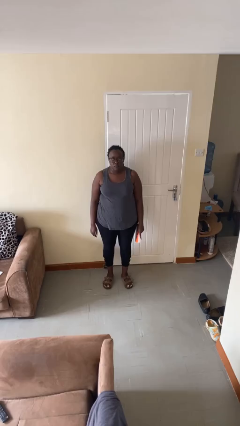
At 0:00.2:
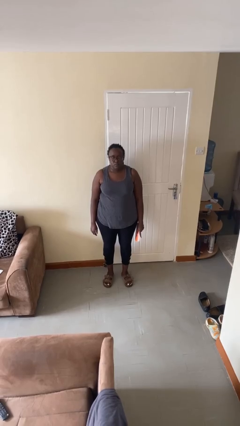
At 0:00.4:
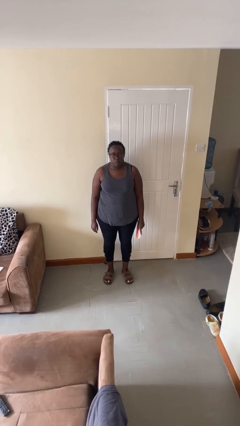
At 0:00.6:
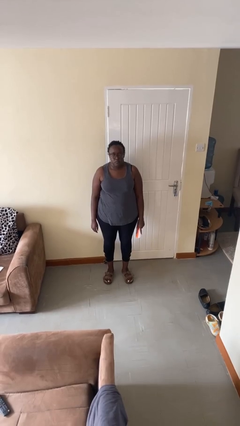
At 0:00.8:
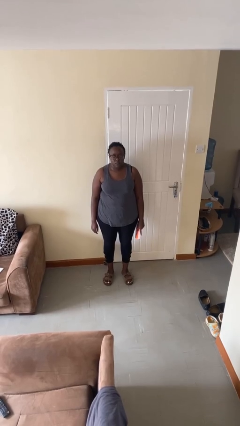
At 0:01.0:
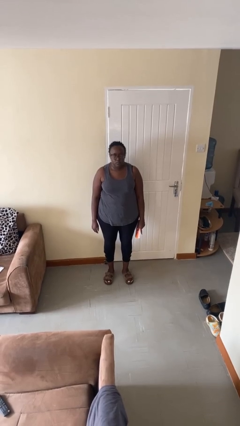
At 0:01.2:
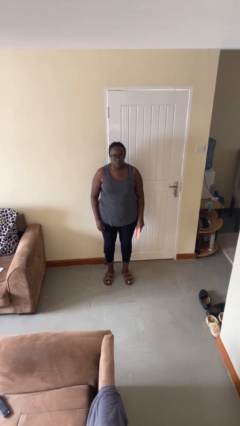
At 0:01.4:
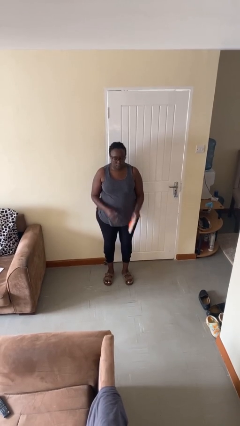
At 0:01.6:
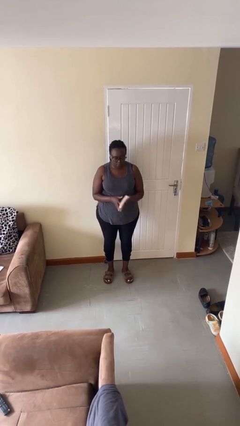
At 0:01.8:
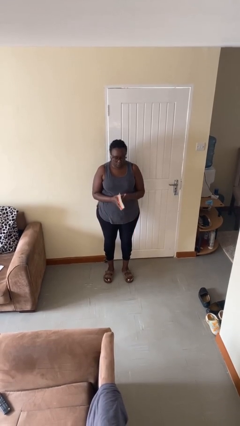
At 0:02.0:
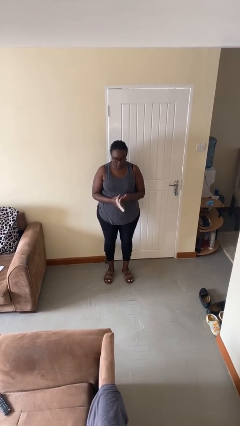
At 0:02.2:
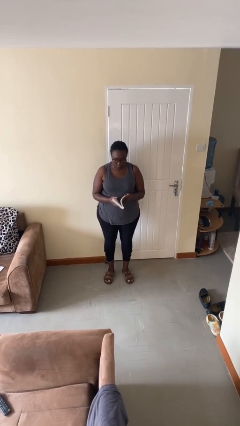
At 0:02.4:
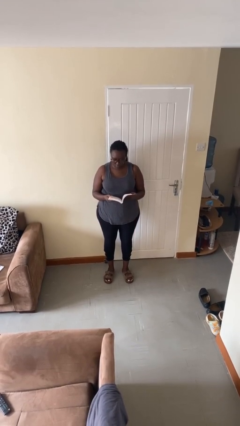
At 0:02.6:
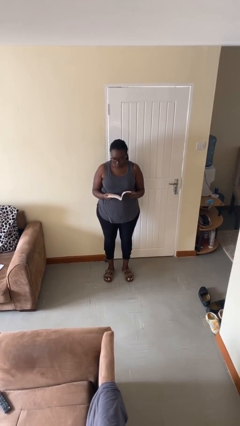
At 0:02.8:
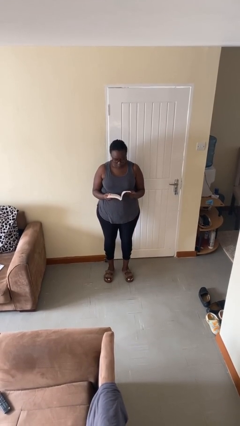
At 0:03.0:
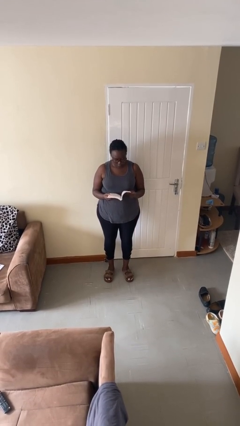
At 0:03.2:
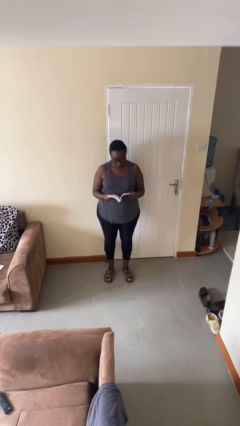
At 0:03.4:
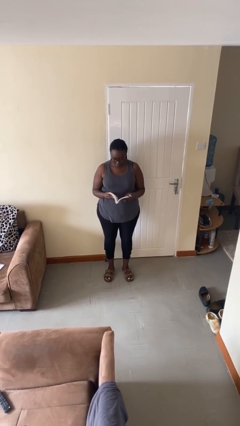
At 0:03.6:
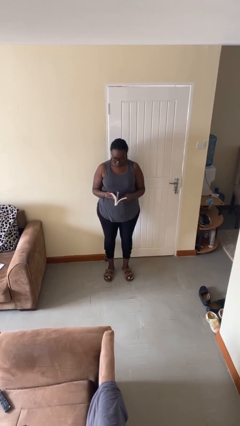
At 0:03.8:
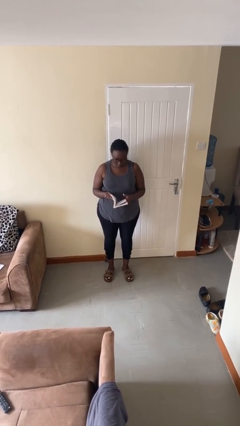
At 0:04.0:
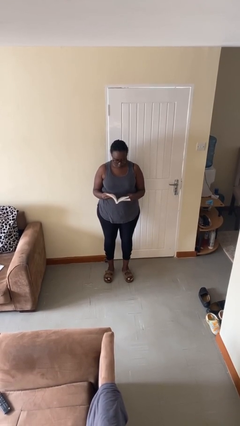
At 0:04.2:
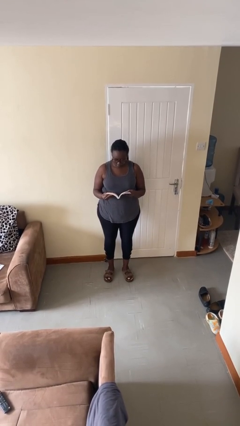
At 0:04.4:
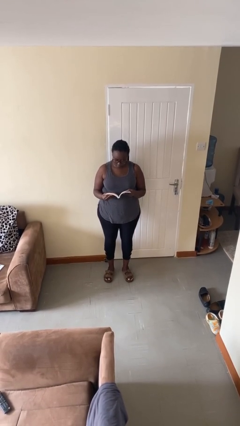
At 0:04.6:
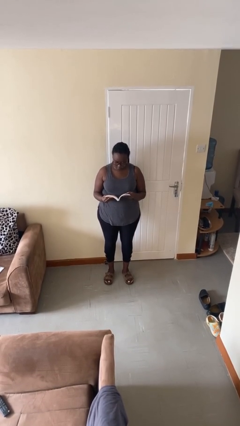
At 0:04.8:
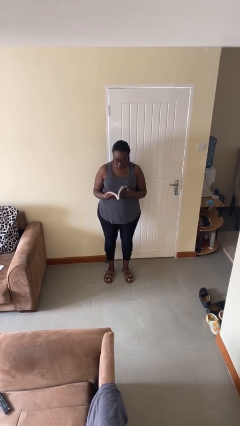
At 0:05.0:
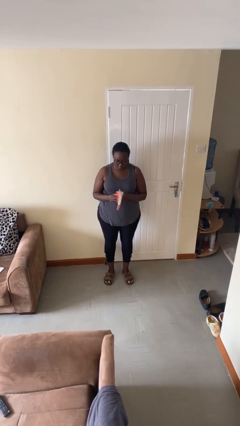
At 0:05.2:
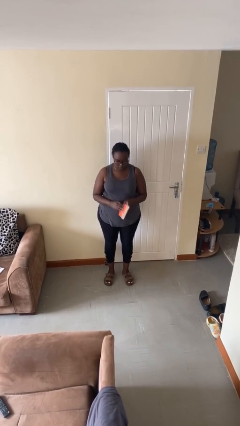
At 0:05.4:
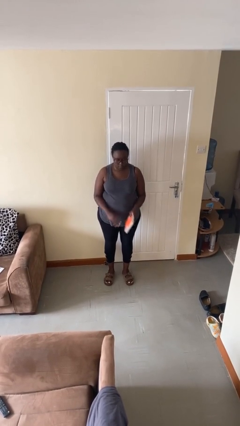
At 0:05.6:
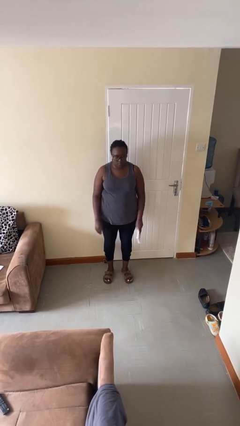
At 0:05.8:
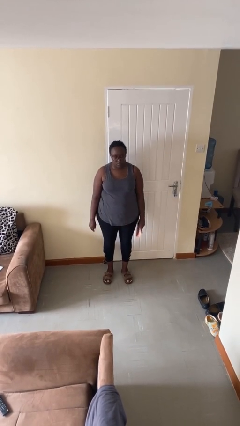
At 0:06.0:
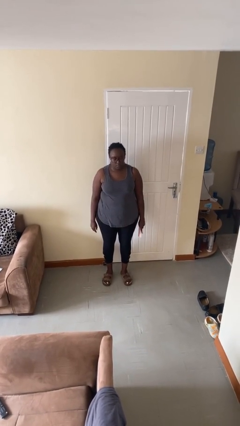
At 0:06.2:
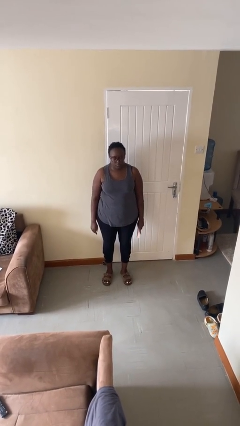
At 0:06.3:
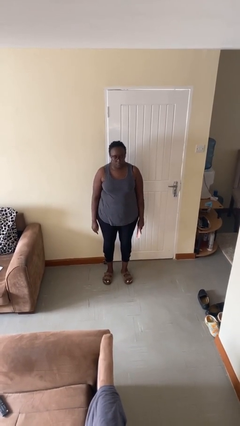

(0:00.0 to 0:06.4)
person reads book

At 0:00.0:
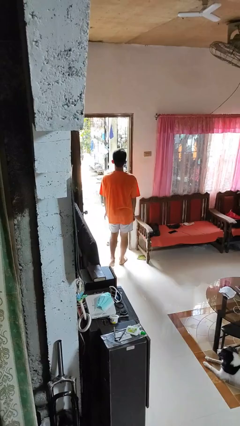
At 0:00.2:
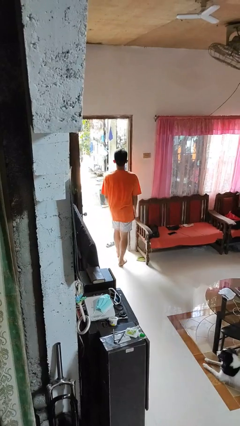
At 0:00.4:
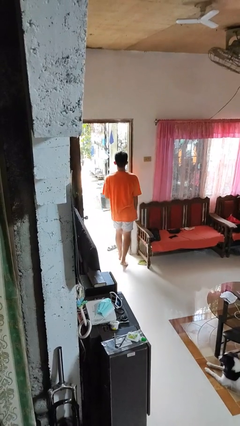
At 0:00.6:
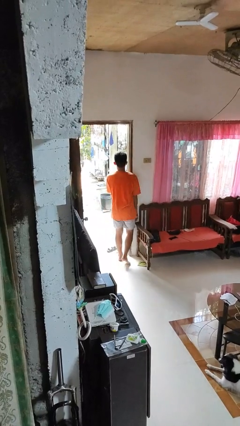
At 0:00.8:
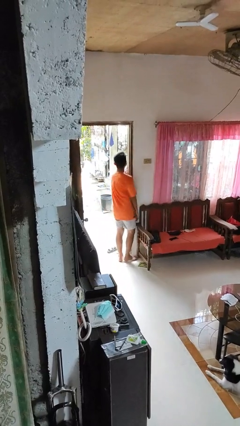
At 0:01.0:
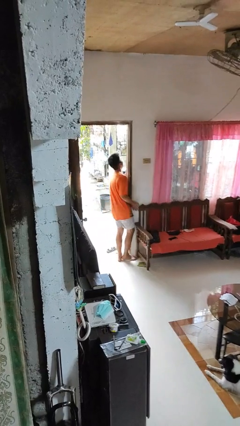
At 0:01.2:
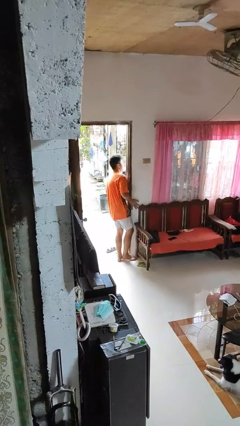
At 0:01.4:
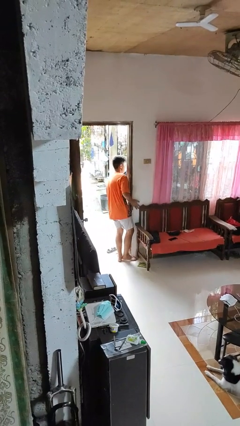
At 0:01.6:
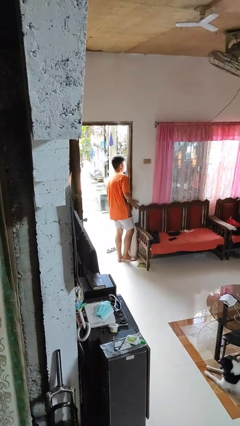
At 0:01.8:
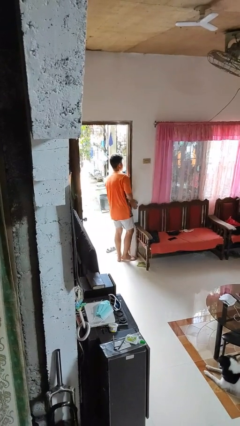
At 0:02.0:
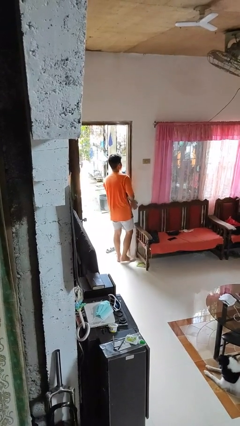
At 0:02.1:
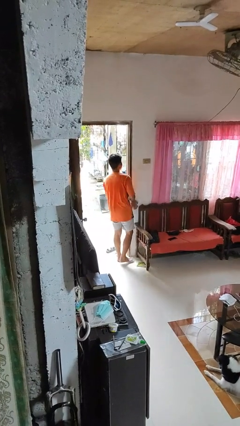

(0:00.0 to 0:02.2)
person bumps into wall

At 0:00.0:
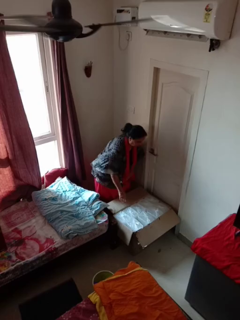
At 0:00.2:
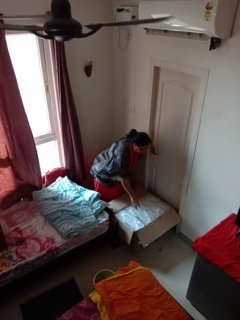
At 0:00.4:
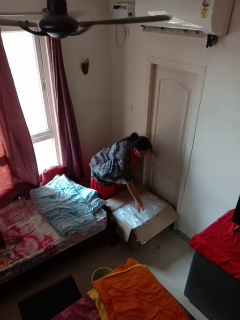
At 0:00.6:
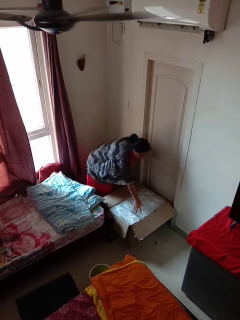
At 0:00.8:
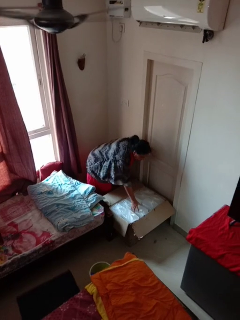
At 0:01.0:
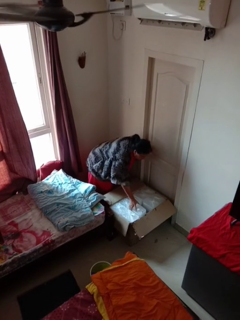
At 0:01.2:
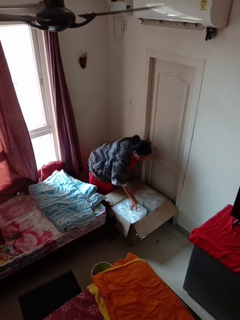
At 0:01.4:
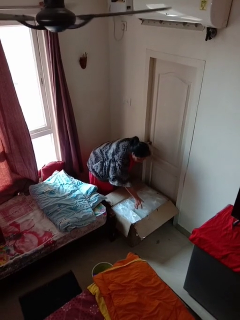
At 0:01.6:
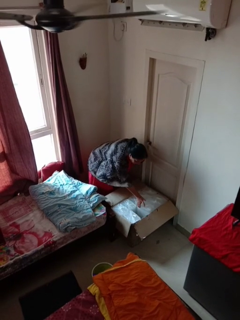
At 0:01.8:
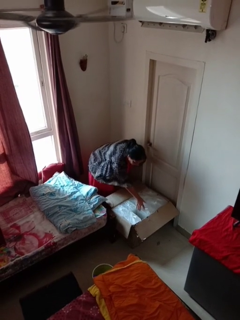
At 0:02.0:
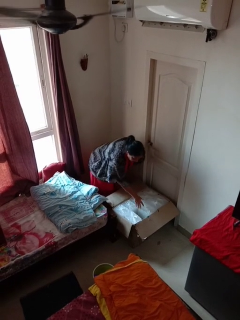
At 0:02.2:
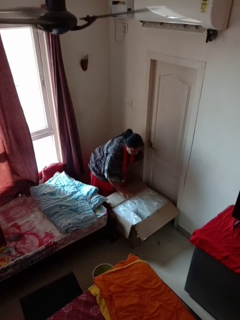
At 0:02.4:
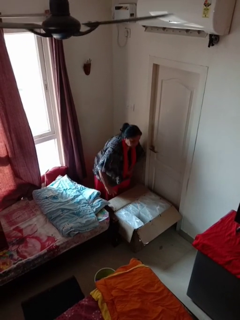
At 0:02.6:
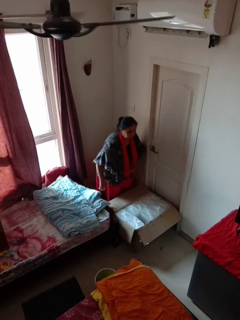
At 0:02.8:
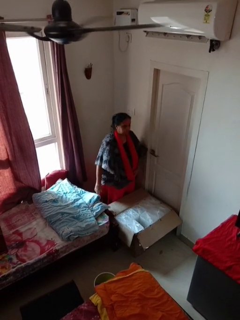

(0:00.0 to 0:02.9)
person searches in box

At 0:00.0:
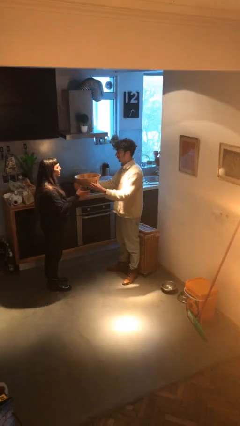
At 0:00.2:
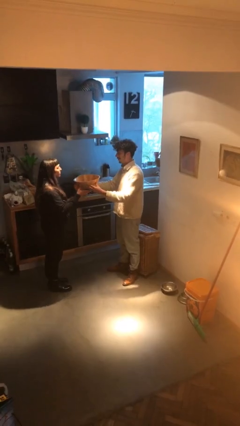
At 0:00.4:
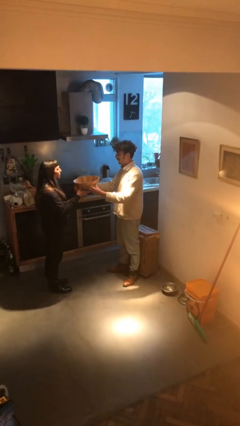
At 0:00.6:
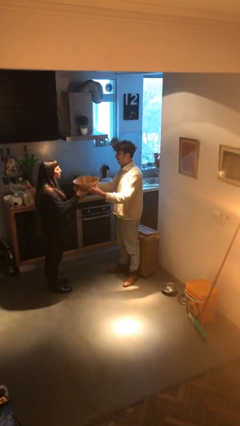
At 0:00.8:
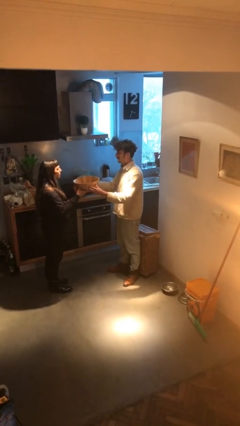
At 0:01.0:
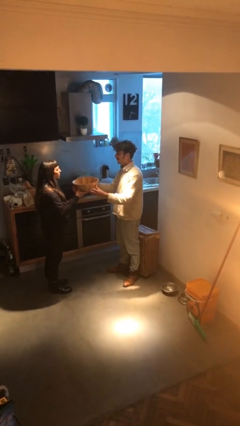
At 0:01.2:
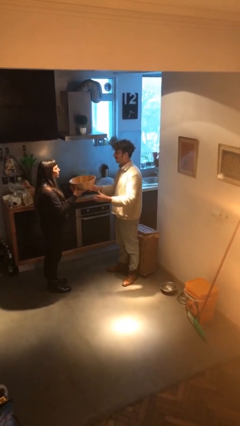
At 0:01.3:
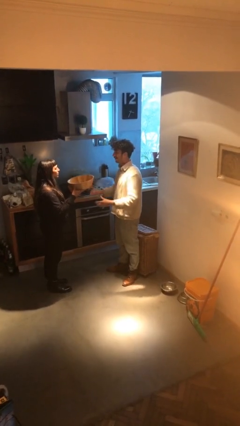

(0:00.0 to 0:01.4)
person transfers object to person

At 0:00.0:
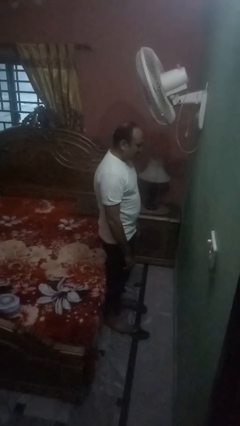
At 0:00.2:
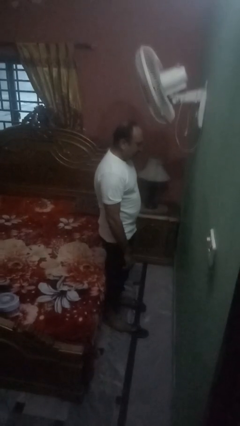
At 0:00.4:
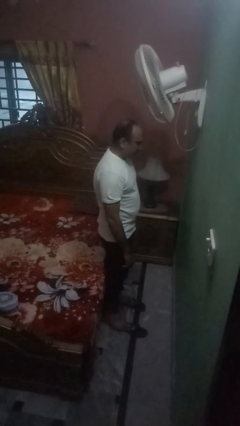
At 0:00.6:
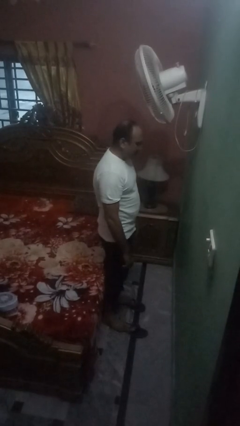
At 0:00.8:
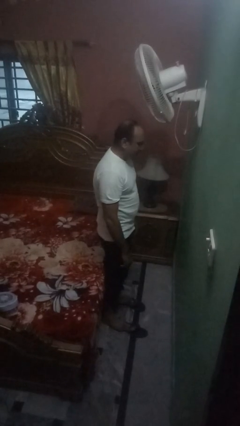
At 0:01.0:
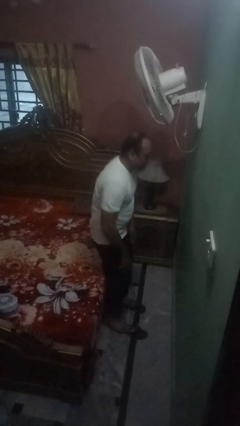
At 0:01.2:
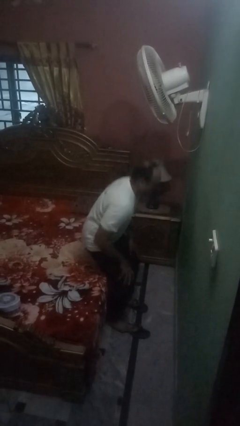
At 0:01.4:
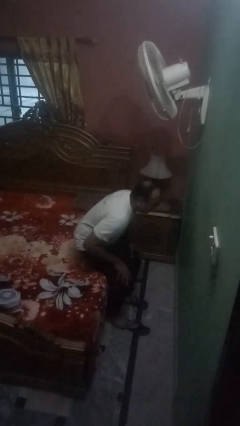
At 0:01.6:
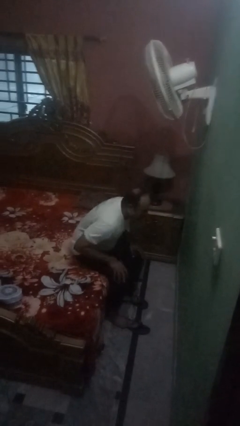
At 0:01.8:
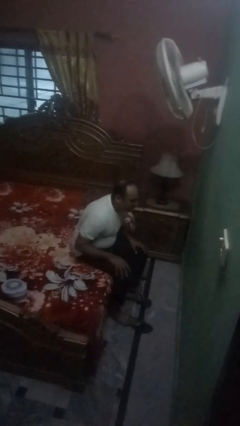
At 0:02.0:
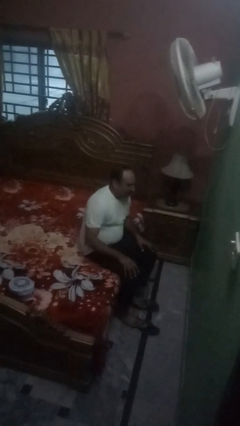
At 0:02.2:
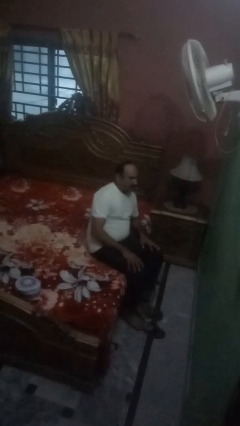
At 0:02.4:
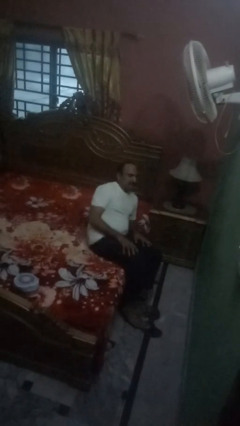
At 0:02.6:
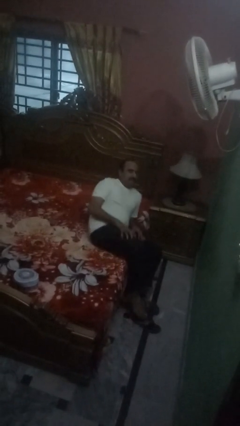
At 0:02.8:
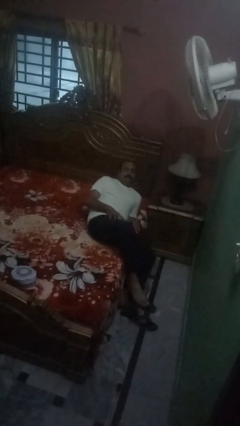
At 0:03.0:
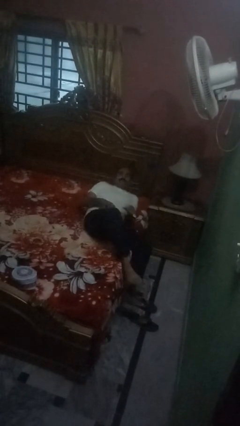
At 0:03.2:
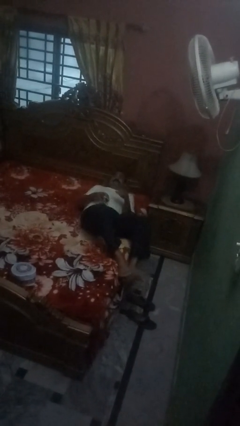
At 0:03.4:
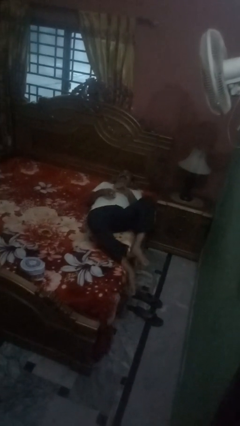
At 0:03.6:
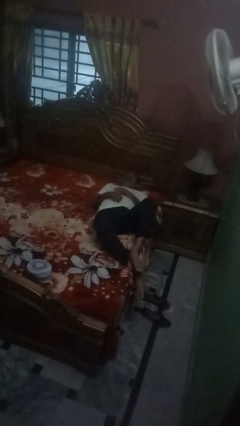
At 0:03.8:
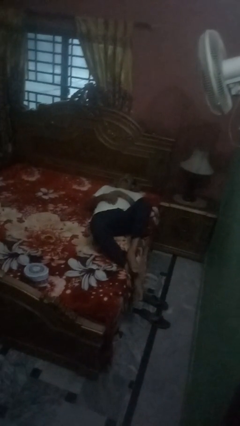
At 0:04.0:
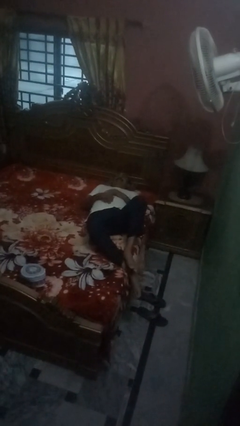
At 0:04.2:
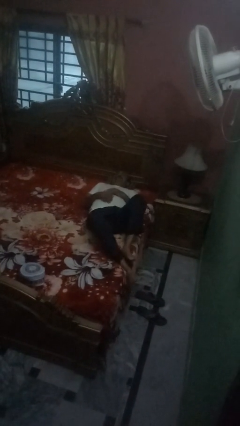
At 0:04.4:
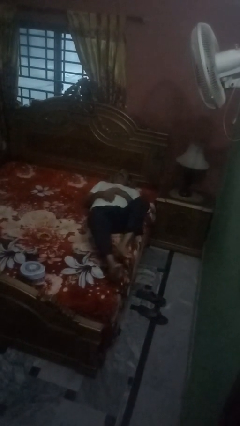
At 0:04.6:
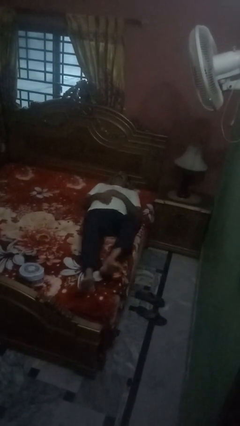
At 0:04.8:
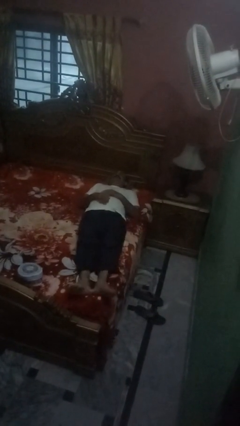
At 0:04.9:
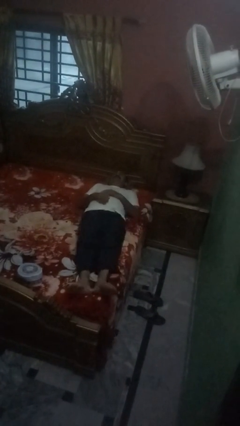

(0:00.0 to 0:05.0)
person lies down on bed

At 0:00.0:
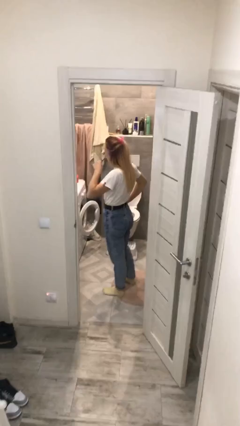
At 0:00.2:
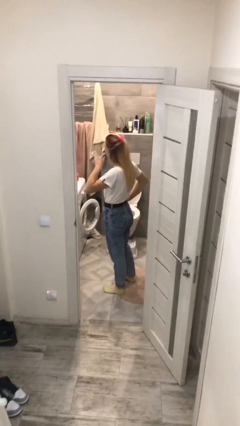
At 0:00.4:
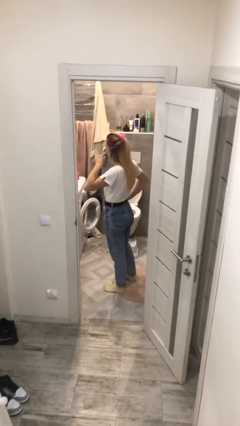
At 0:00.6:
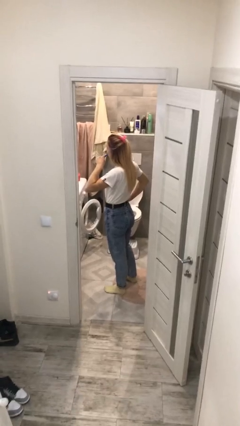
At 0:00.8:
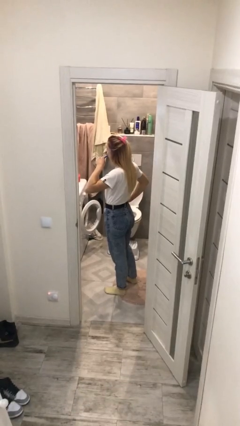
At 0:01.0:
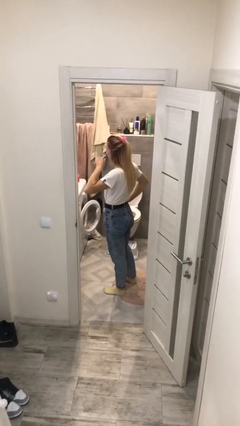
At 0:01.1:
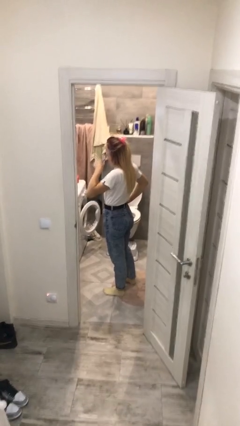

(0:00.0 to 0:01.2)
person brushes teeth
